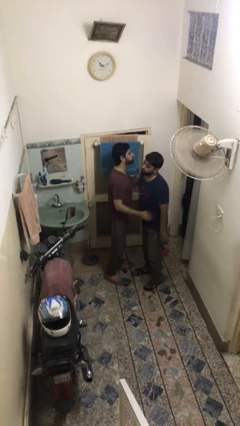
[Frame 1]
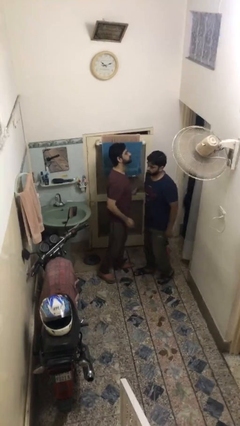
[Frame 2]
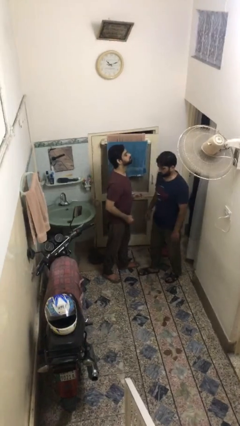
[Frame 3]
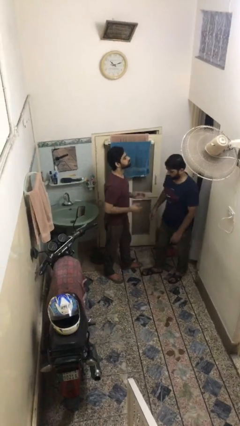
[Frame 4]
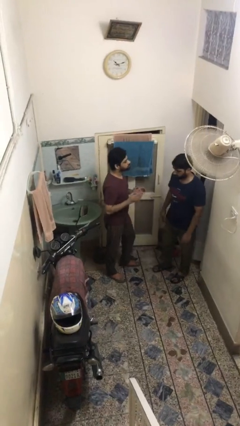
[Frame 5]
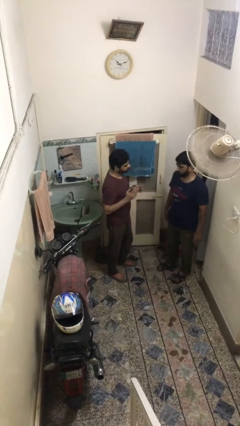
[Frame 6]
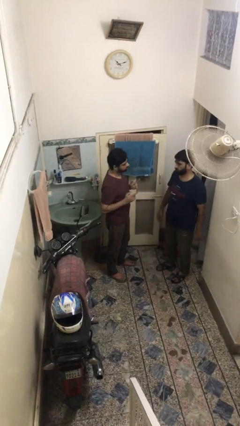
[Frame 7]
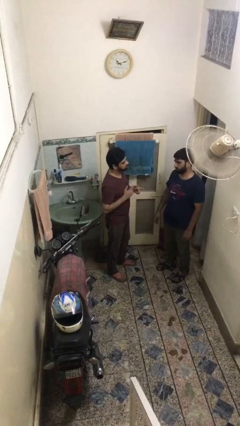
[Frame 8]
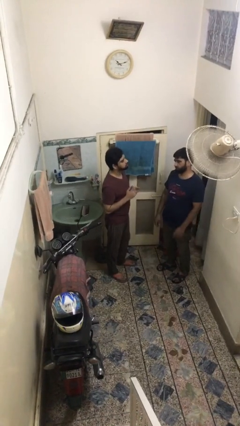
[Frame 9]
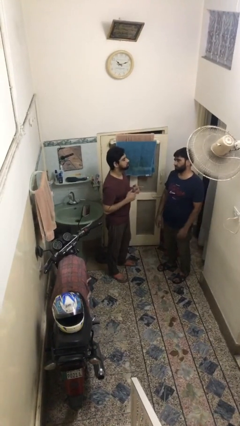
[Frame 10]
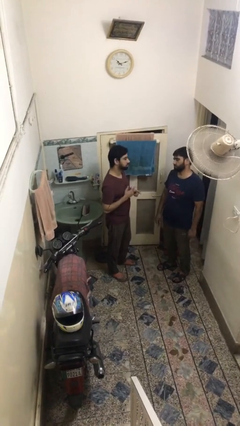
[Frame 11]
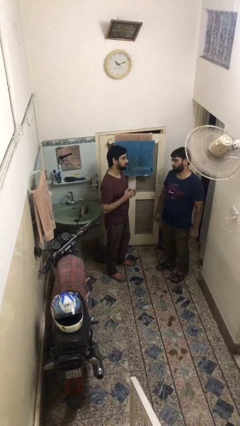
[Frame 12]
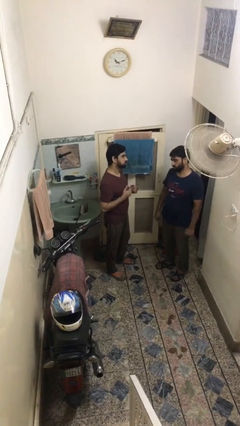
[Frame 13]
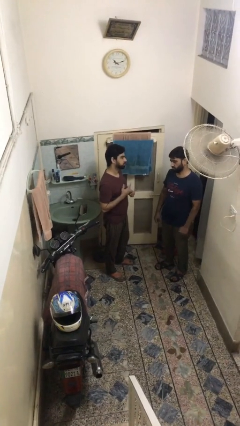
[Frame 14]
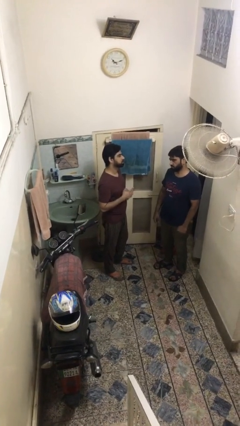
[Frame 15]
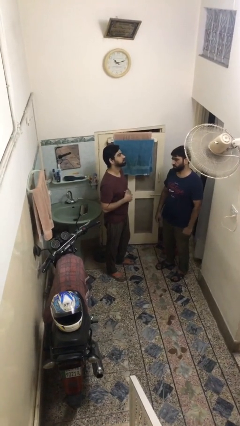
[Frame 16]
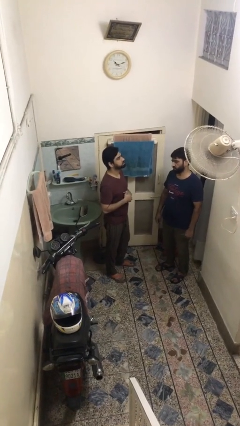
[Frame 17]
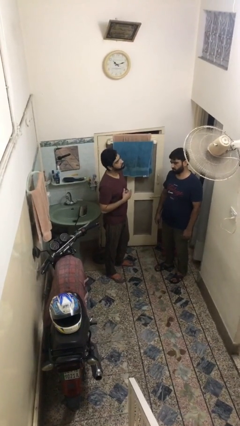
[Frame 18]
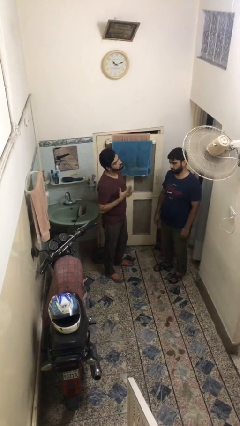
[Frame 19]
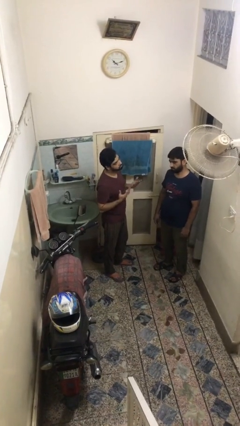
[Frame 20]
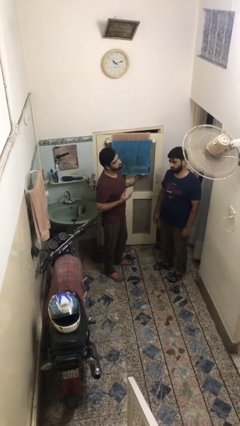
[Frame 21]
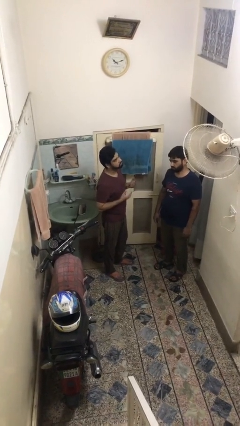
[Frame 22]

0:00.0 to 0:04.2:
person talks to person

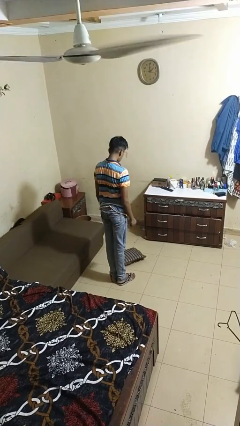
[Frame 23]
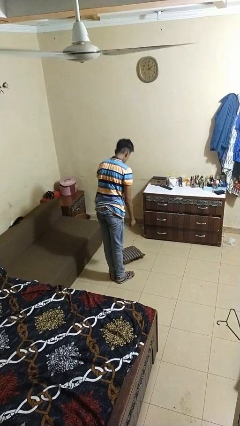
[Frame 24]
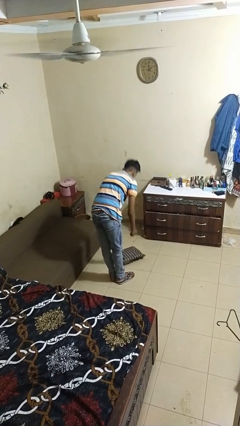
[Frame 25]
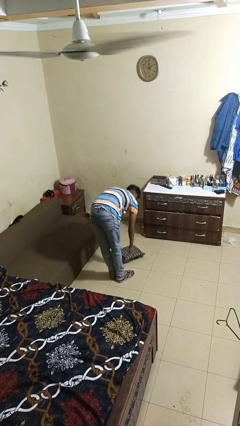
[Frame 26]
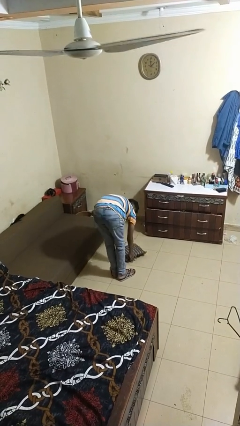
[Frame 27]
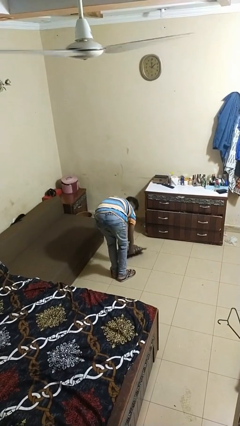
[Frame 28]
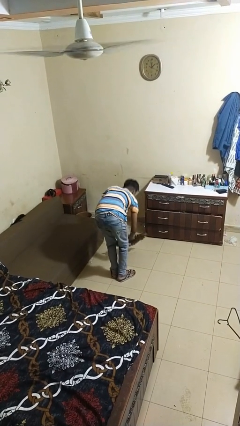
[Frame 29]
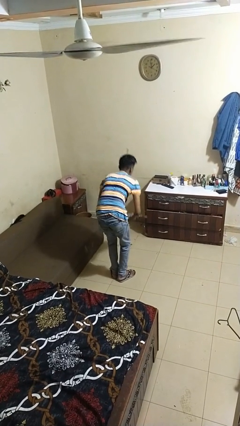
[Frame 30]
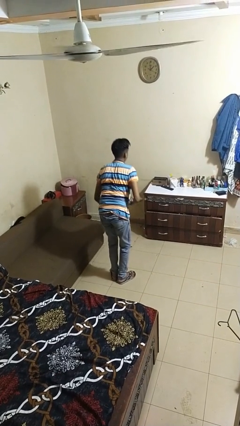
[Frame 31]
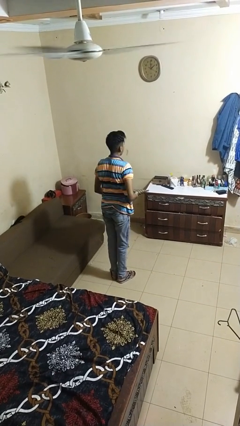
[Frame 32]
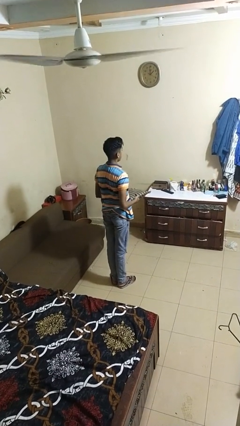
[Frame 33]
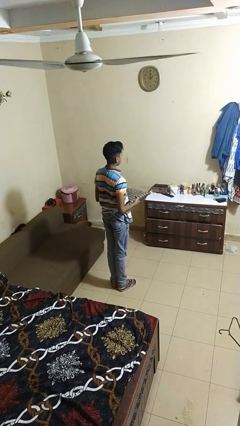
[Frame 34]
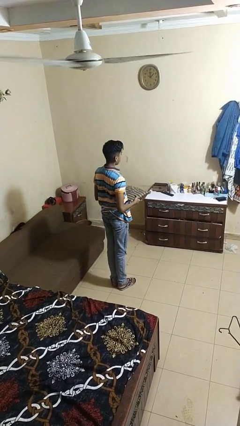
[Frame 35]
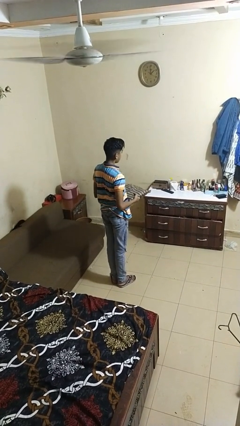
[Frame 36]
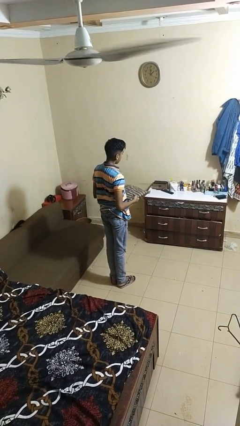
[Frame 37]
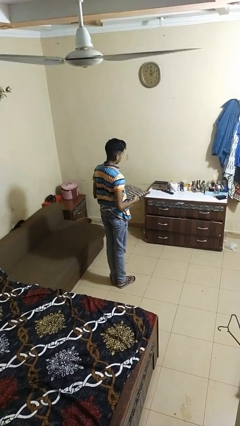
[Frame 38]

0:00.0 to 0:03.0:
person picks up object from floor

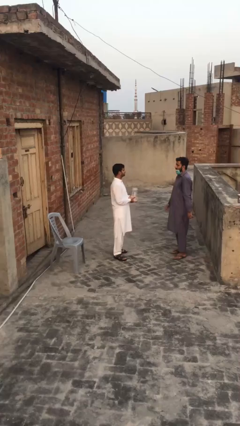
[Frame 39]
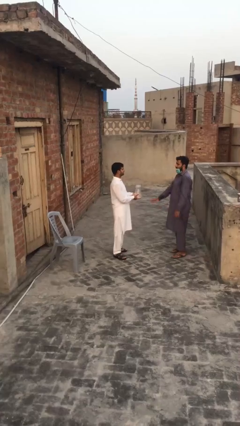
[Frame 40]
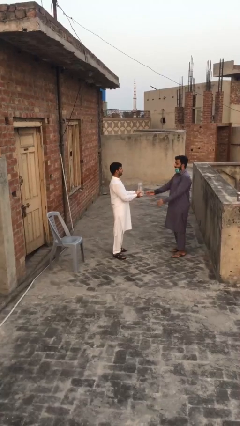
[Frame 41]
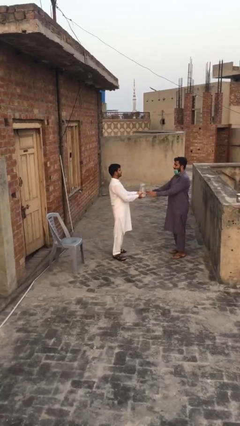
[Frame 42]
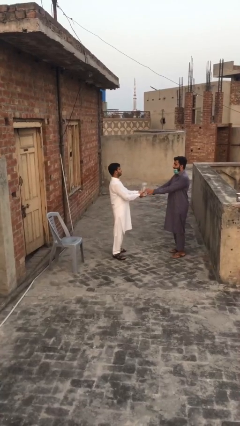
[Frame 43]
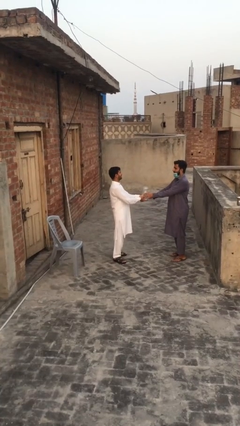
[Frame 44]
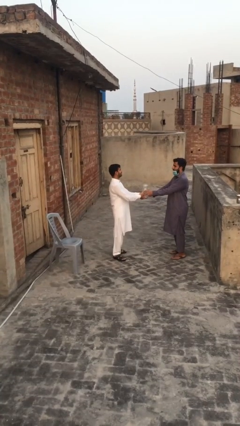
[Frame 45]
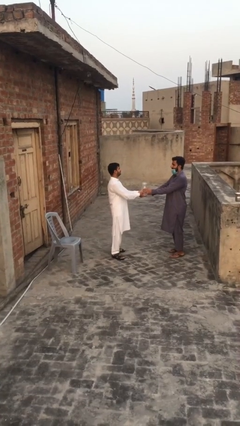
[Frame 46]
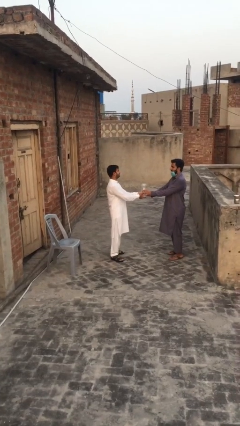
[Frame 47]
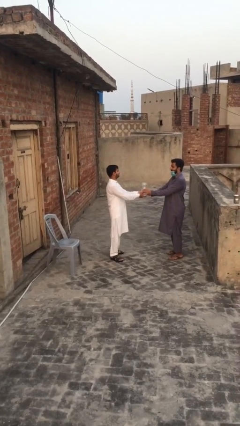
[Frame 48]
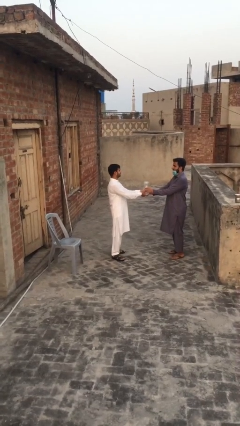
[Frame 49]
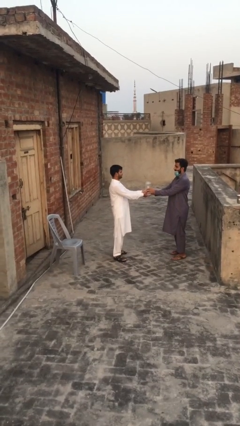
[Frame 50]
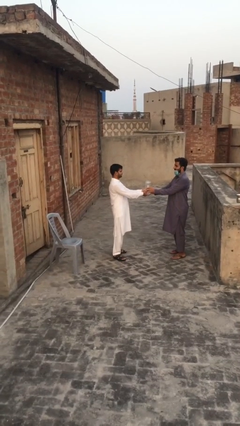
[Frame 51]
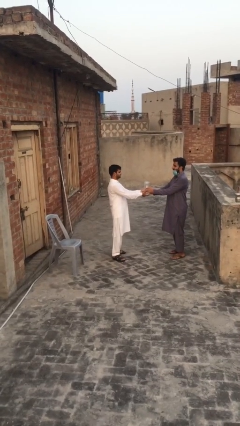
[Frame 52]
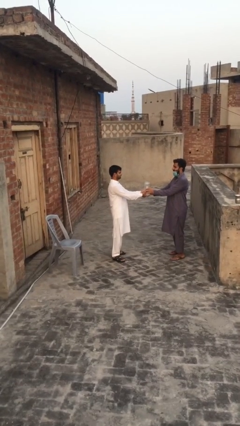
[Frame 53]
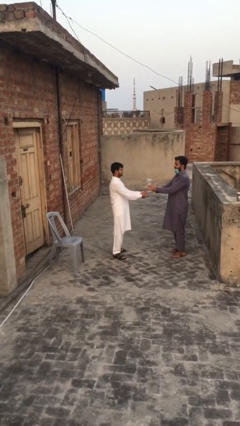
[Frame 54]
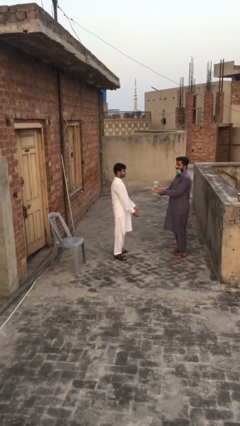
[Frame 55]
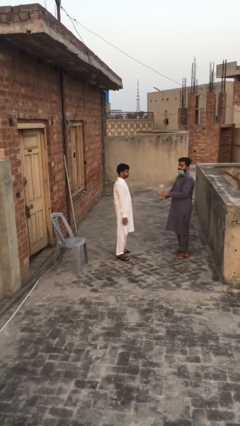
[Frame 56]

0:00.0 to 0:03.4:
person transfers object to person

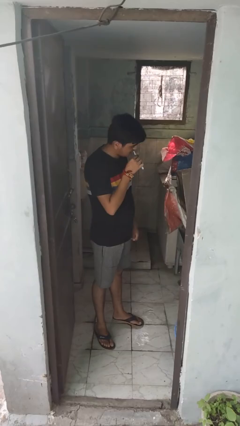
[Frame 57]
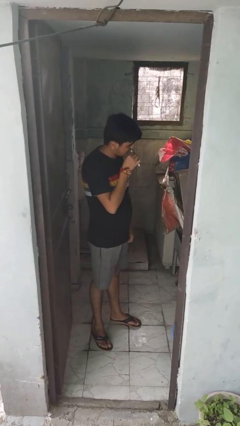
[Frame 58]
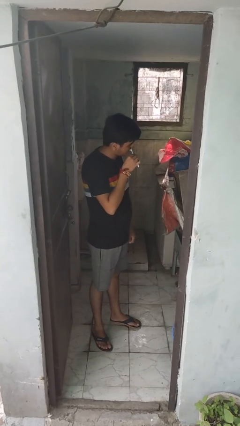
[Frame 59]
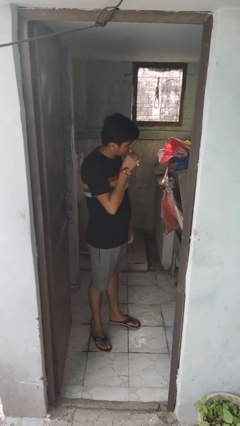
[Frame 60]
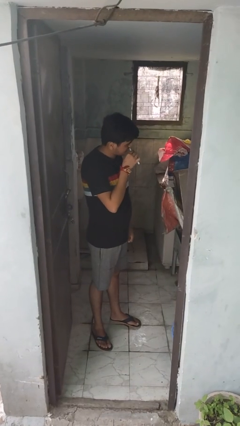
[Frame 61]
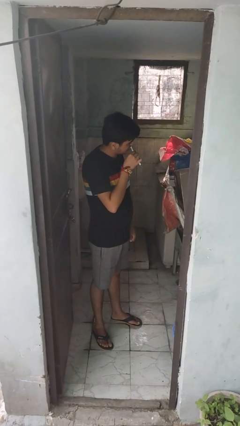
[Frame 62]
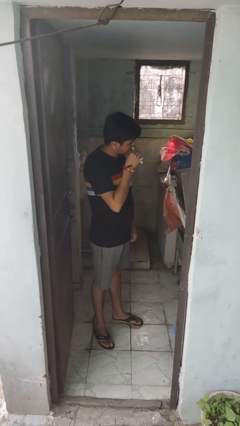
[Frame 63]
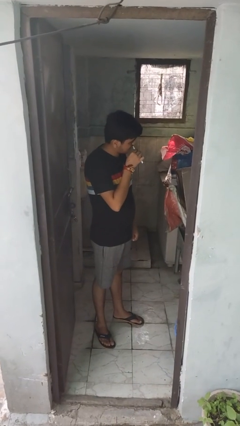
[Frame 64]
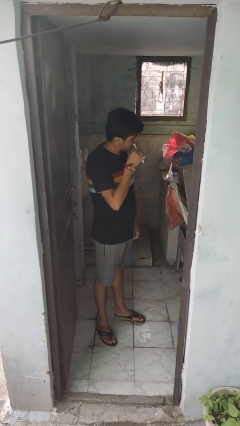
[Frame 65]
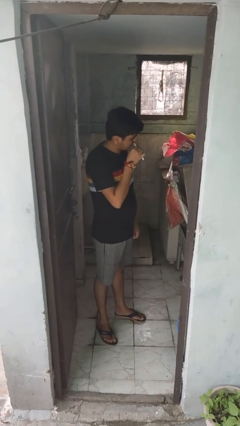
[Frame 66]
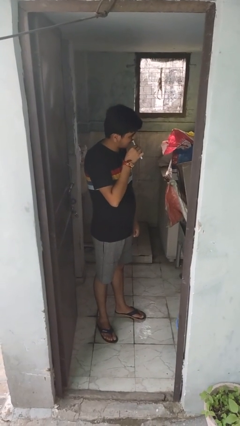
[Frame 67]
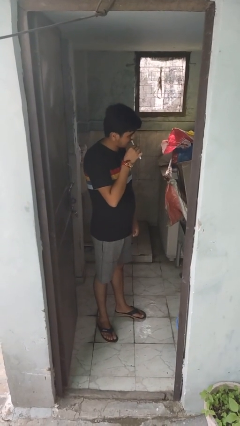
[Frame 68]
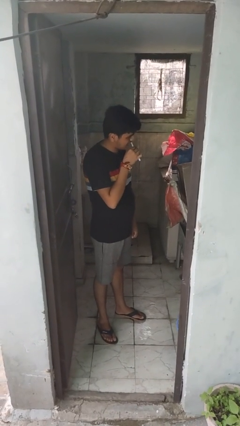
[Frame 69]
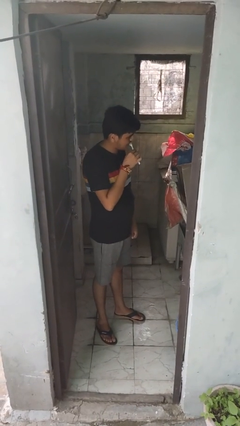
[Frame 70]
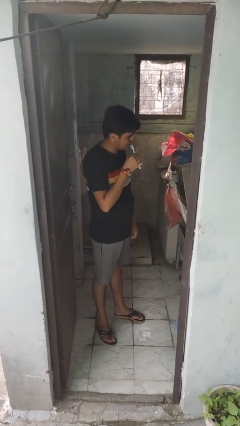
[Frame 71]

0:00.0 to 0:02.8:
person brushes teeth

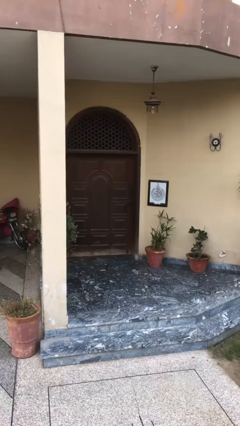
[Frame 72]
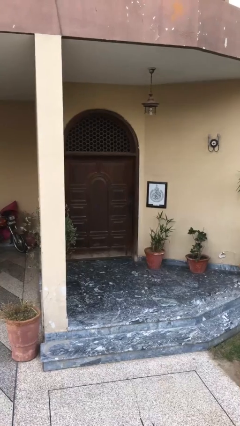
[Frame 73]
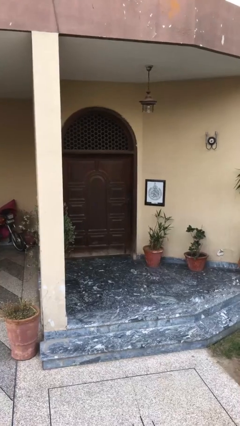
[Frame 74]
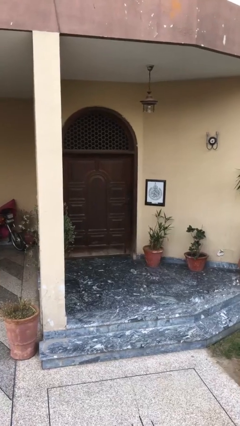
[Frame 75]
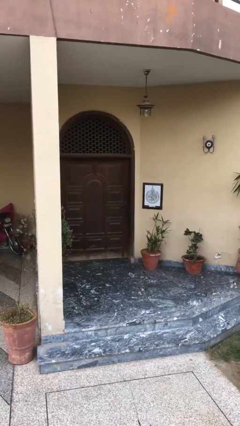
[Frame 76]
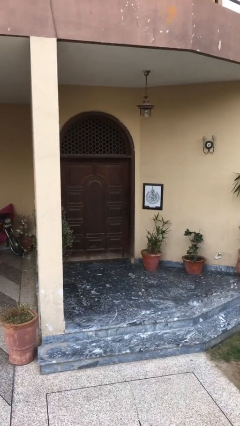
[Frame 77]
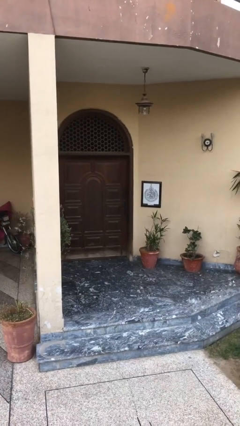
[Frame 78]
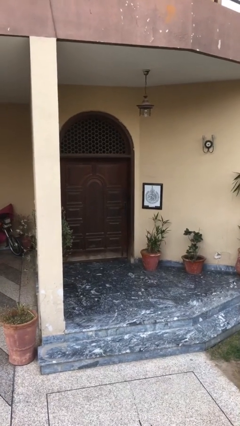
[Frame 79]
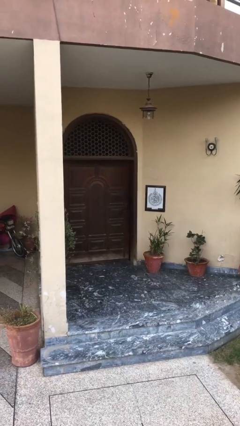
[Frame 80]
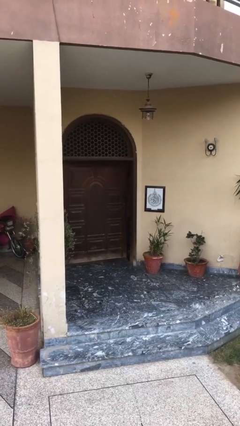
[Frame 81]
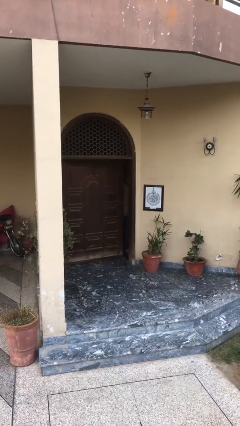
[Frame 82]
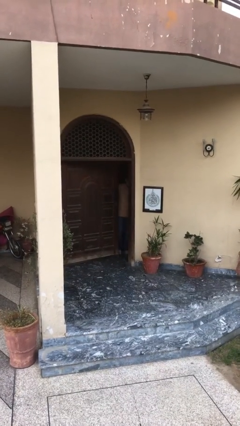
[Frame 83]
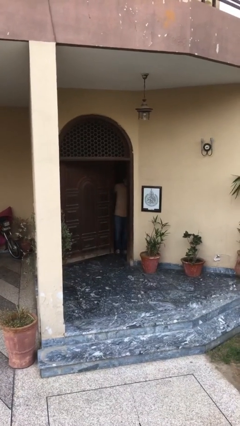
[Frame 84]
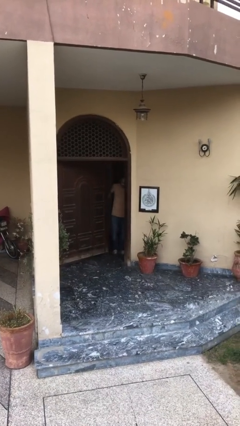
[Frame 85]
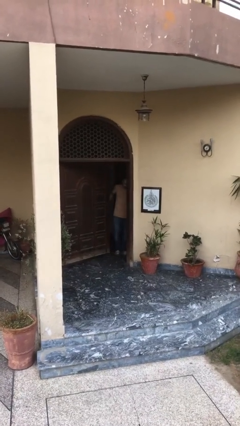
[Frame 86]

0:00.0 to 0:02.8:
person opens facility door

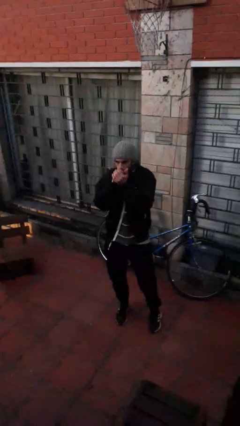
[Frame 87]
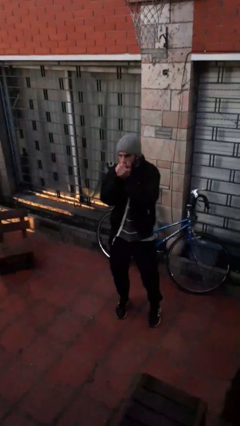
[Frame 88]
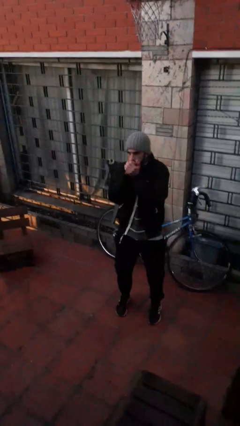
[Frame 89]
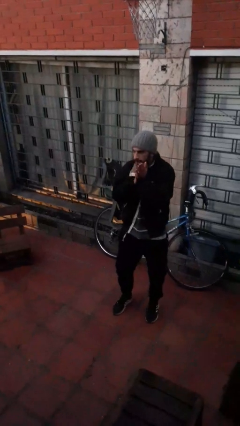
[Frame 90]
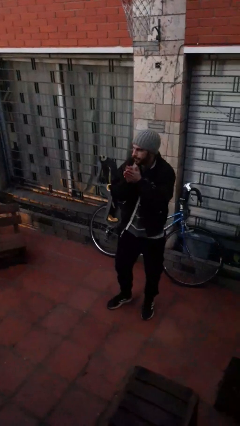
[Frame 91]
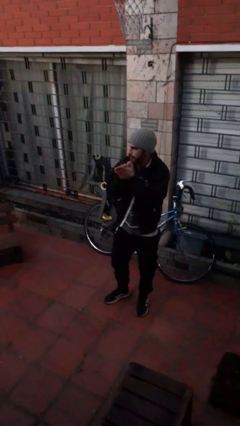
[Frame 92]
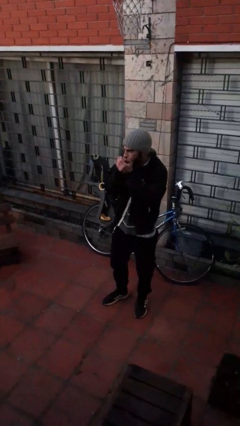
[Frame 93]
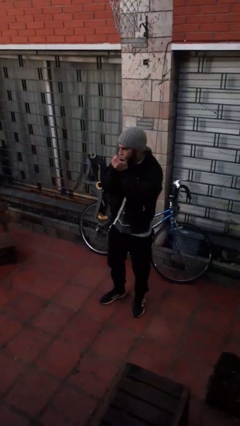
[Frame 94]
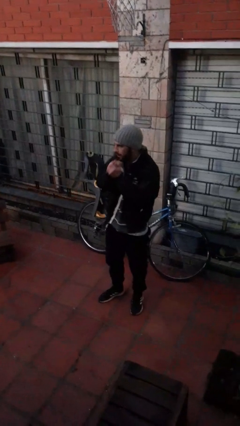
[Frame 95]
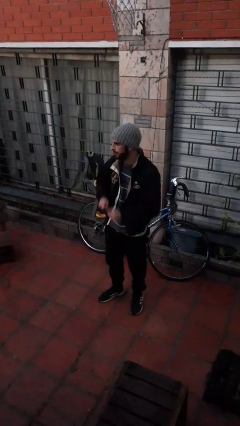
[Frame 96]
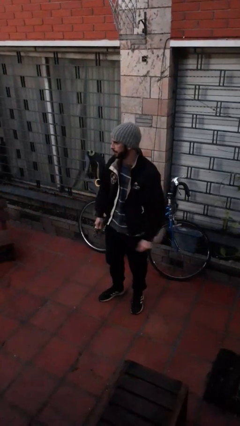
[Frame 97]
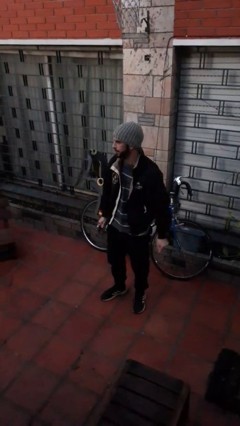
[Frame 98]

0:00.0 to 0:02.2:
person blows into hands
